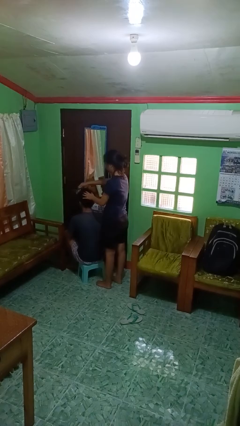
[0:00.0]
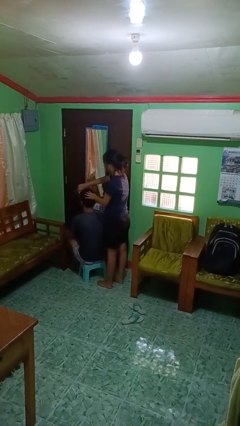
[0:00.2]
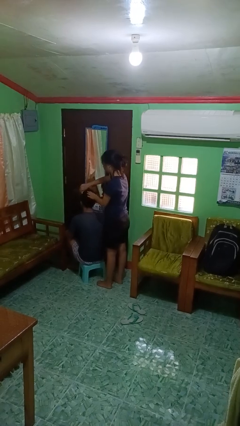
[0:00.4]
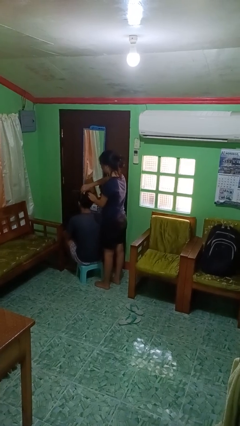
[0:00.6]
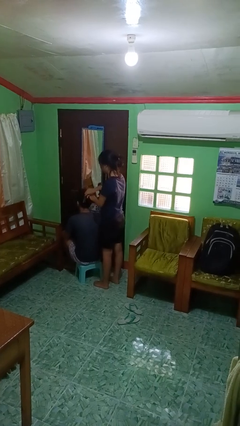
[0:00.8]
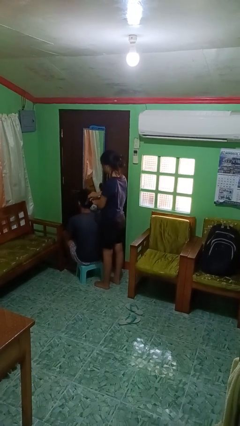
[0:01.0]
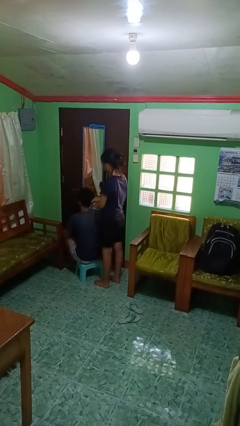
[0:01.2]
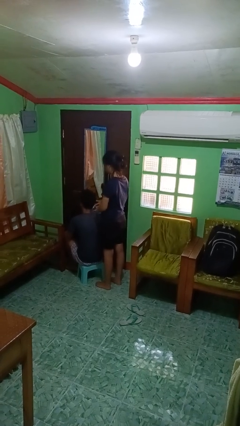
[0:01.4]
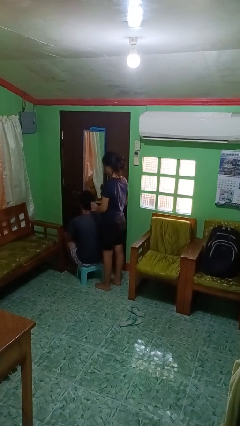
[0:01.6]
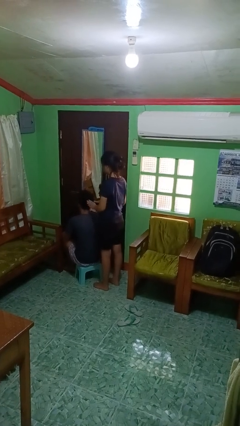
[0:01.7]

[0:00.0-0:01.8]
person brushes hair of person

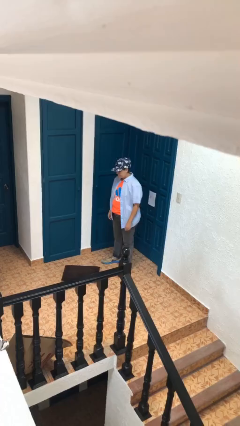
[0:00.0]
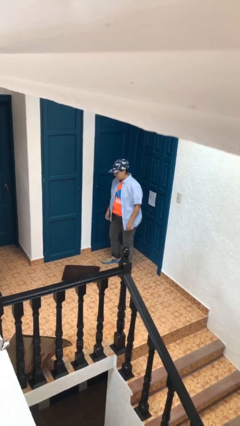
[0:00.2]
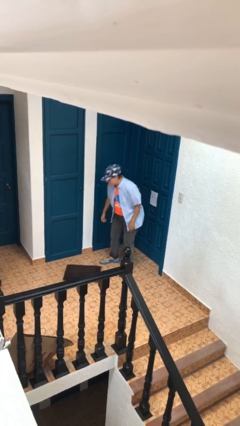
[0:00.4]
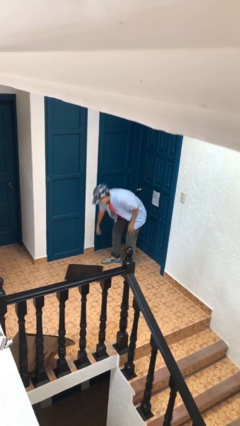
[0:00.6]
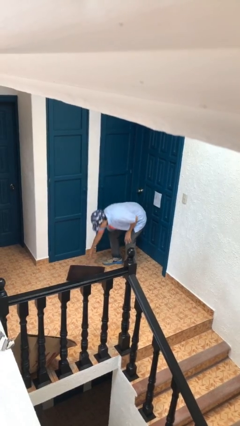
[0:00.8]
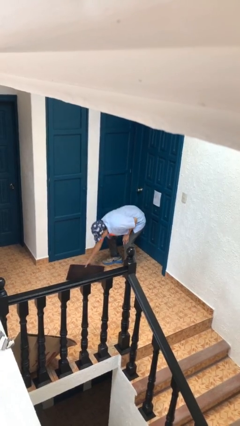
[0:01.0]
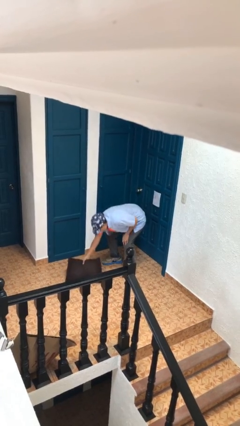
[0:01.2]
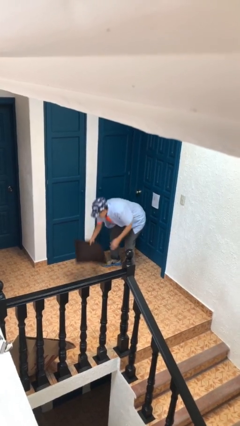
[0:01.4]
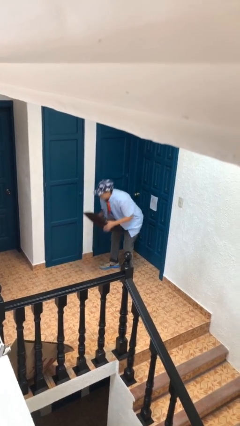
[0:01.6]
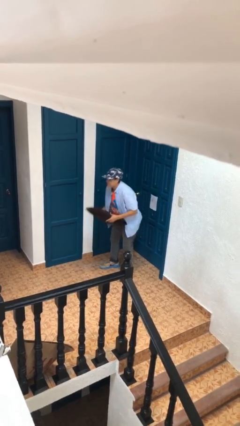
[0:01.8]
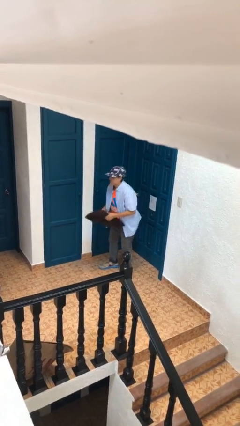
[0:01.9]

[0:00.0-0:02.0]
person picks up object from floor

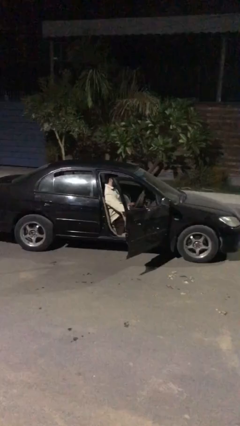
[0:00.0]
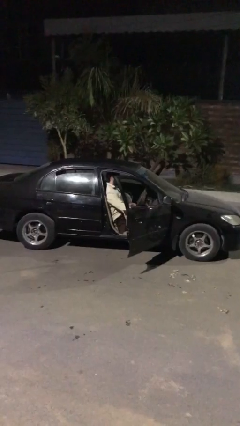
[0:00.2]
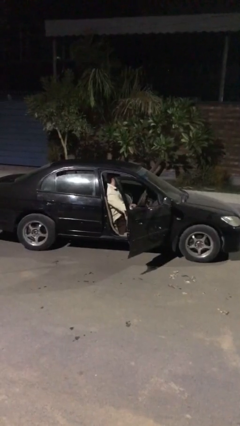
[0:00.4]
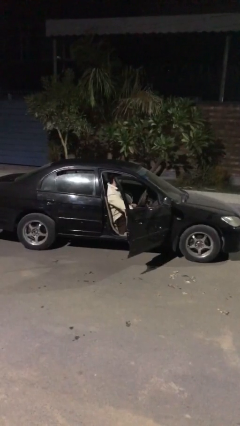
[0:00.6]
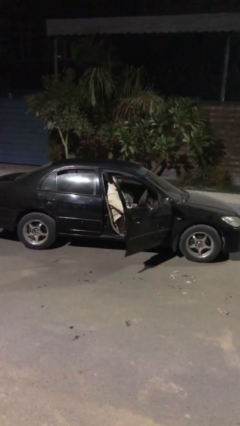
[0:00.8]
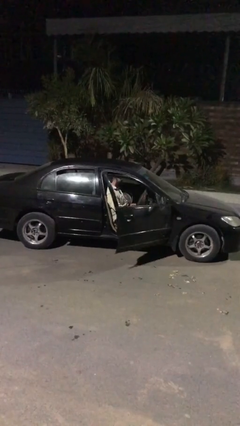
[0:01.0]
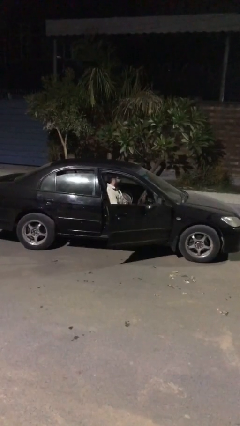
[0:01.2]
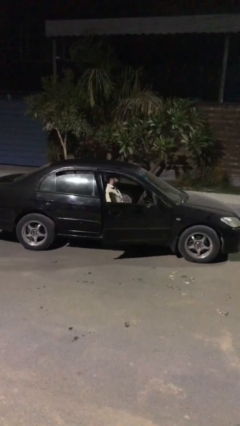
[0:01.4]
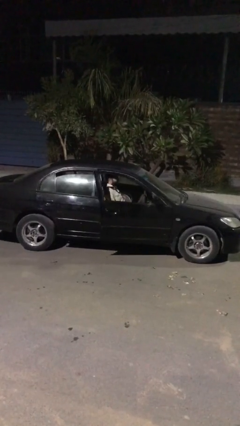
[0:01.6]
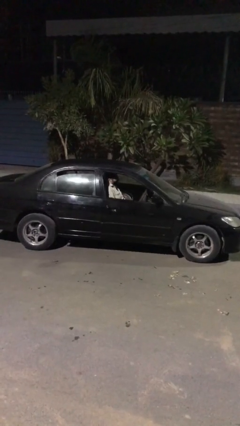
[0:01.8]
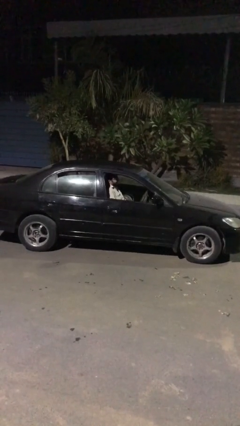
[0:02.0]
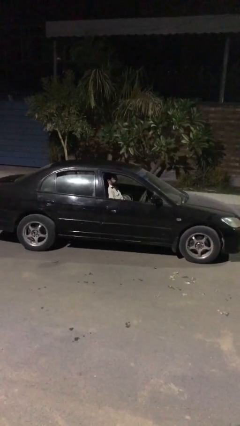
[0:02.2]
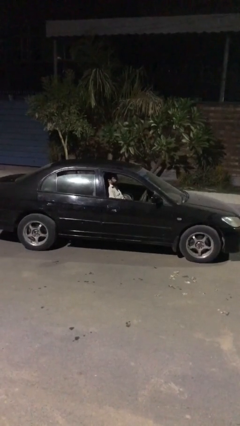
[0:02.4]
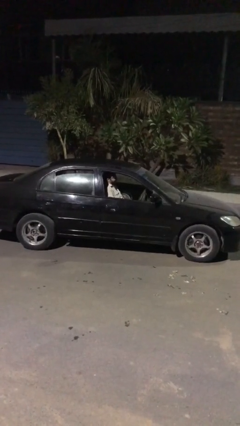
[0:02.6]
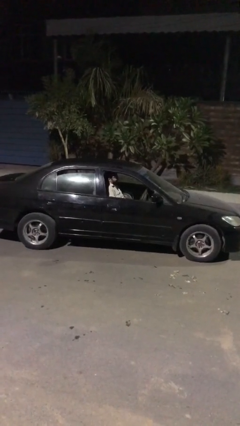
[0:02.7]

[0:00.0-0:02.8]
person closes car door

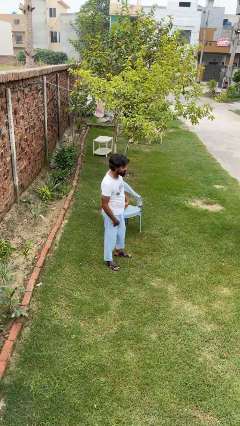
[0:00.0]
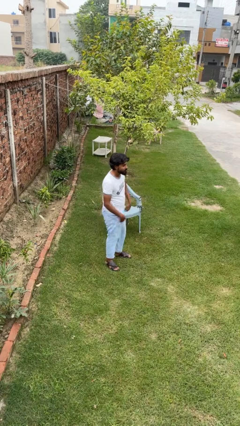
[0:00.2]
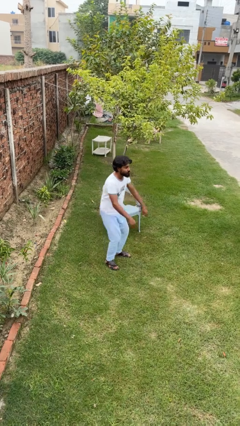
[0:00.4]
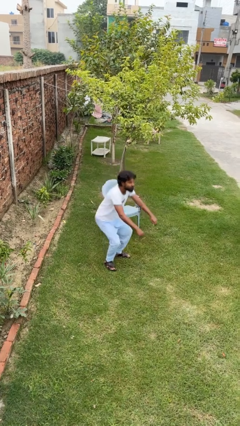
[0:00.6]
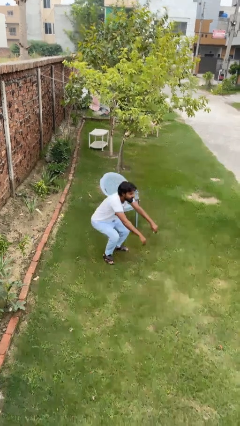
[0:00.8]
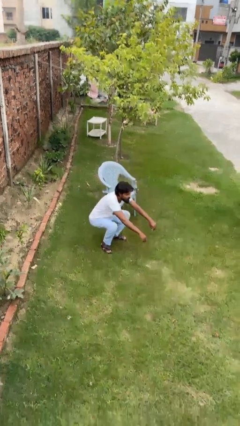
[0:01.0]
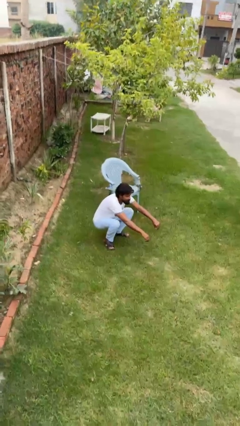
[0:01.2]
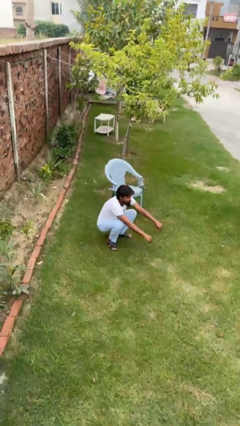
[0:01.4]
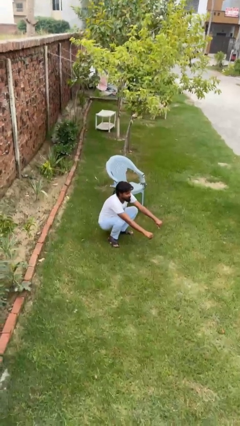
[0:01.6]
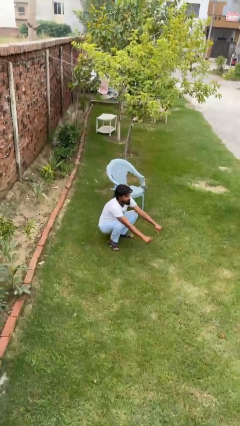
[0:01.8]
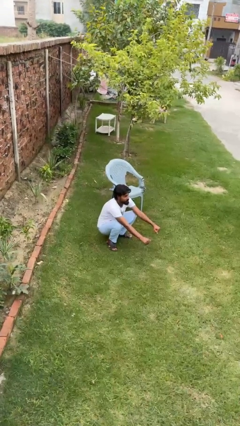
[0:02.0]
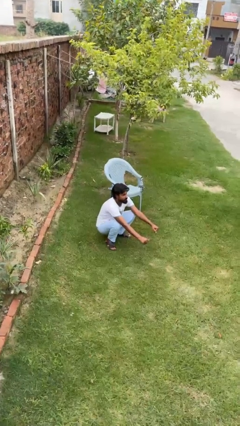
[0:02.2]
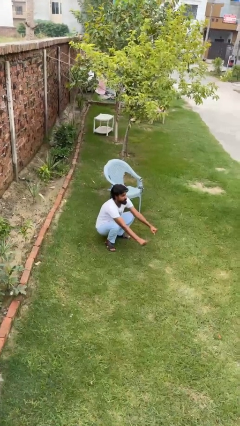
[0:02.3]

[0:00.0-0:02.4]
person squats

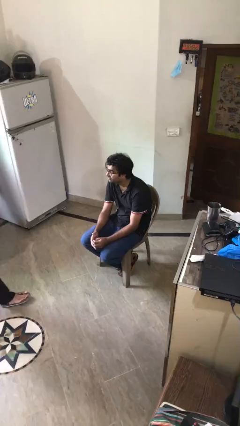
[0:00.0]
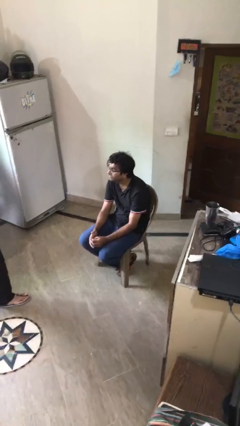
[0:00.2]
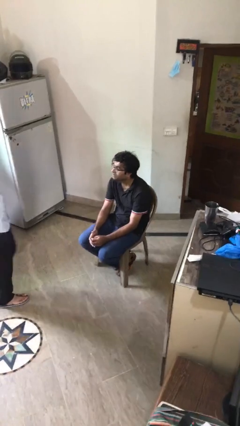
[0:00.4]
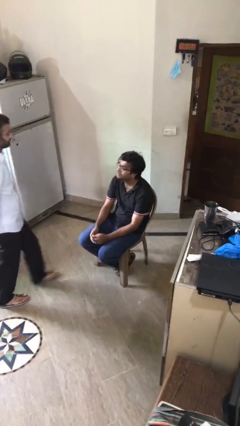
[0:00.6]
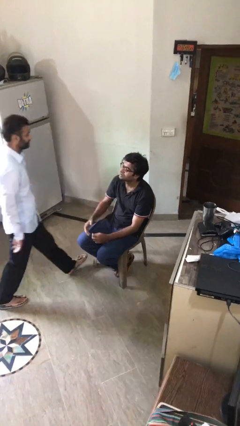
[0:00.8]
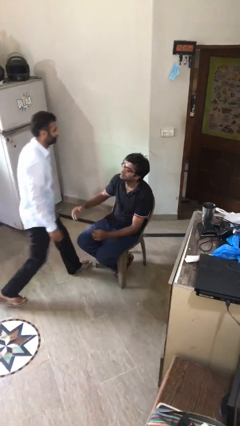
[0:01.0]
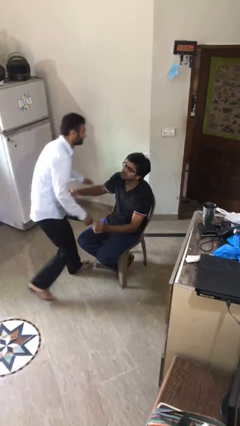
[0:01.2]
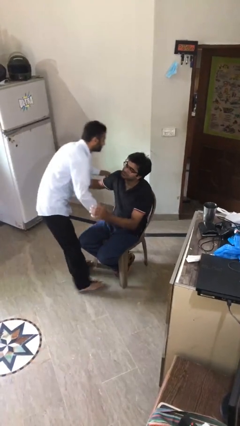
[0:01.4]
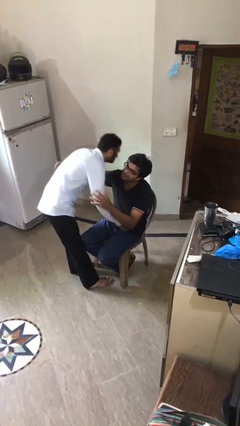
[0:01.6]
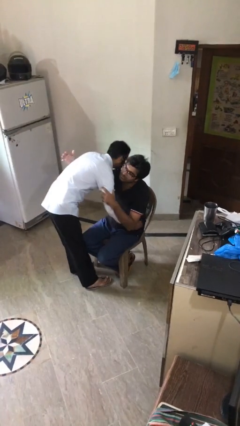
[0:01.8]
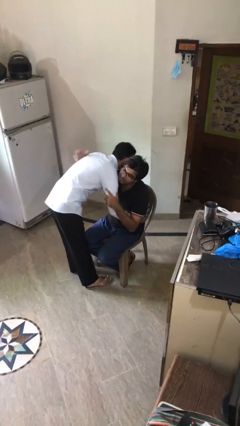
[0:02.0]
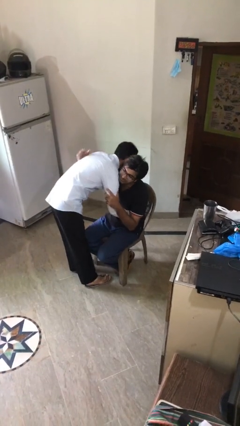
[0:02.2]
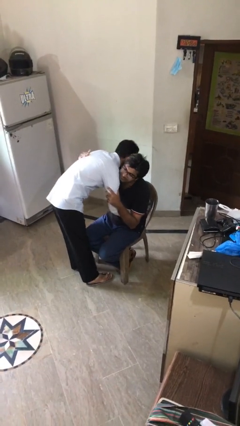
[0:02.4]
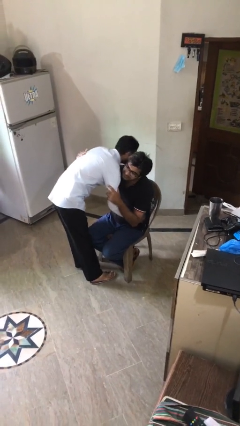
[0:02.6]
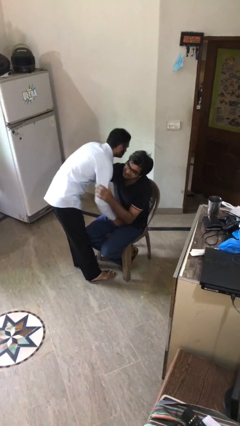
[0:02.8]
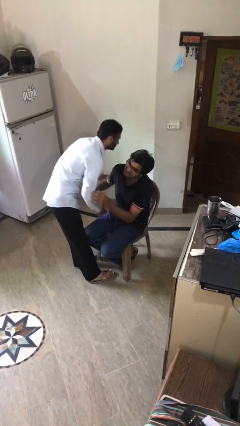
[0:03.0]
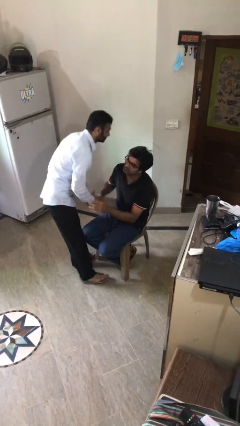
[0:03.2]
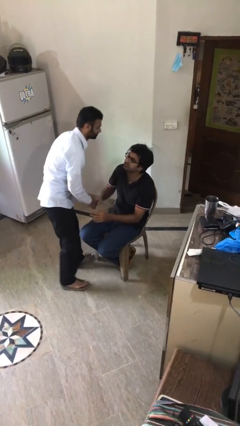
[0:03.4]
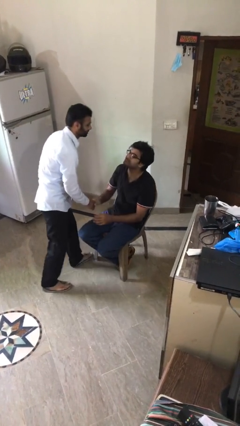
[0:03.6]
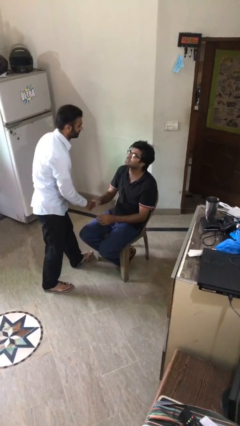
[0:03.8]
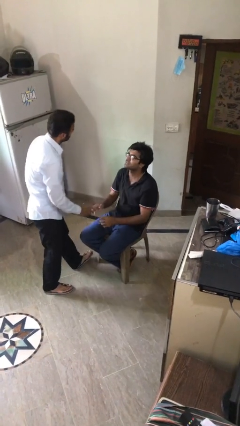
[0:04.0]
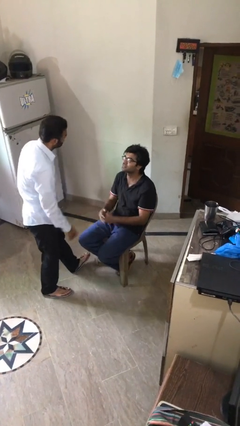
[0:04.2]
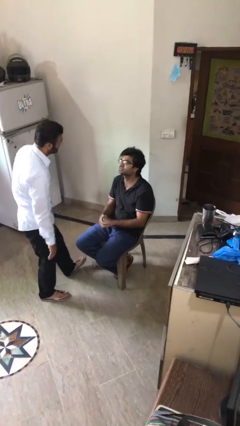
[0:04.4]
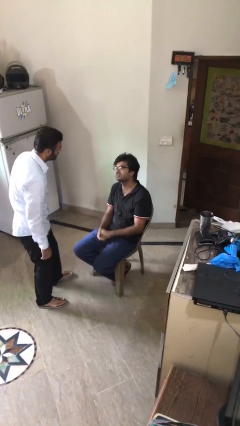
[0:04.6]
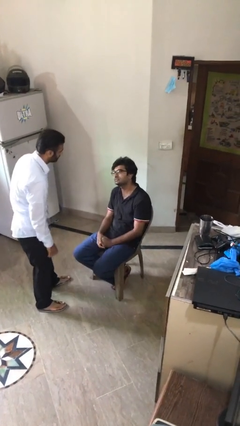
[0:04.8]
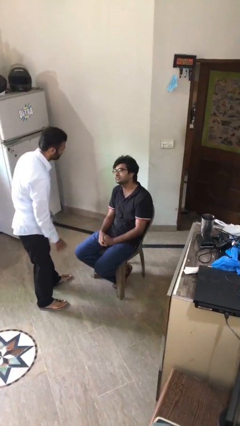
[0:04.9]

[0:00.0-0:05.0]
person embraces person

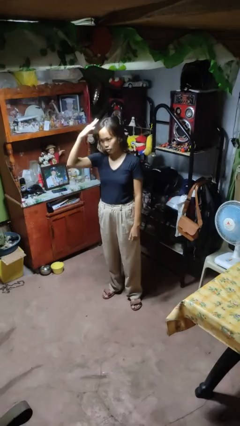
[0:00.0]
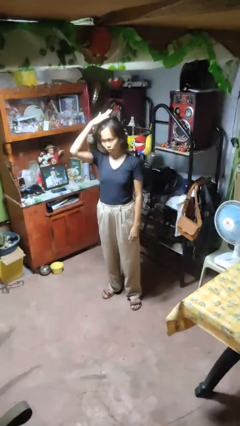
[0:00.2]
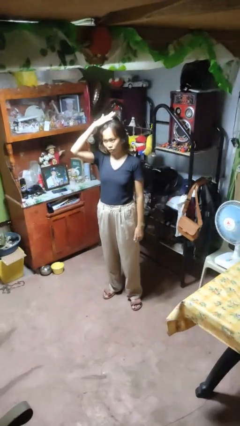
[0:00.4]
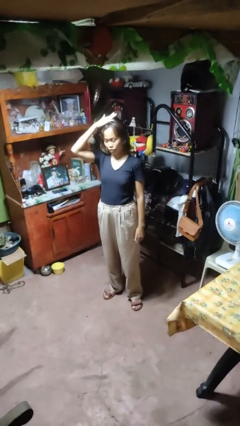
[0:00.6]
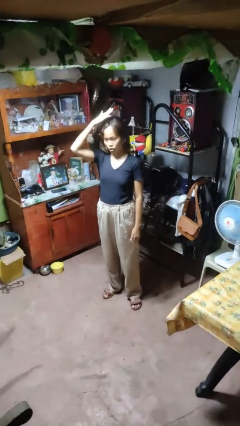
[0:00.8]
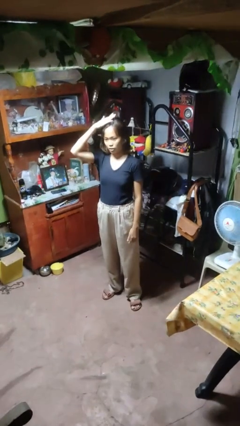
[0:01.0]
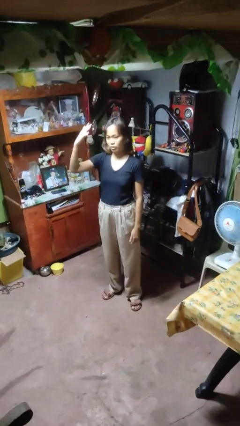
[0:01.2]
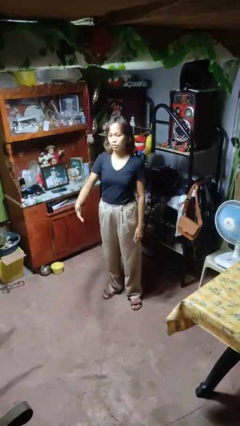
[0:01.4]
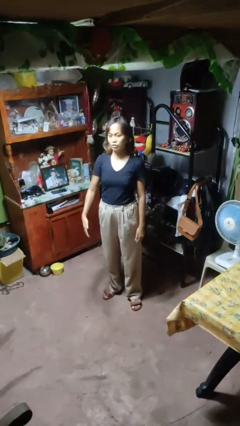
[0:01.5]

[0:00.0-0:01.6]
person pats head

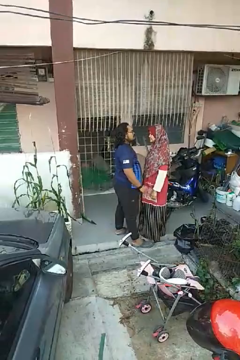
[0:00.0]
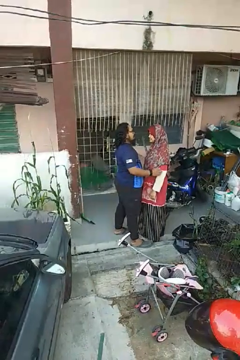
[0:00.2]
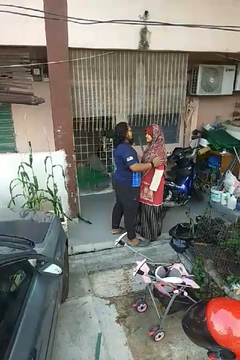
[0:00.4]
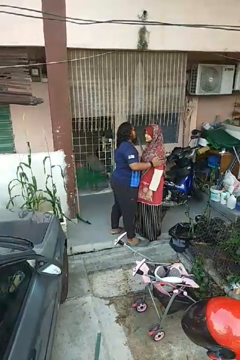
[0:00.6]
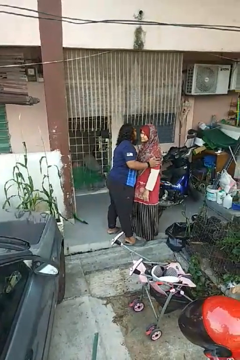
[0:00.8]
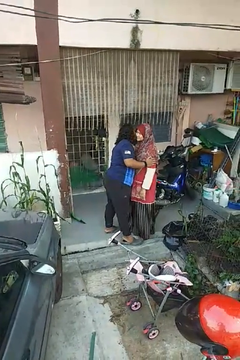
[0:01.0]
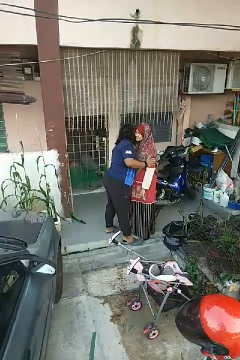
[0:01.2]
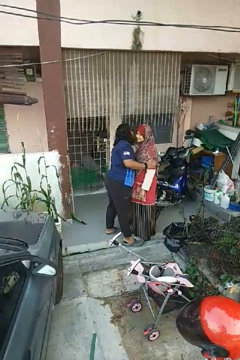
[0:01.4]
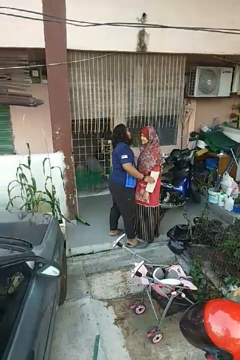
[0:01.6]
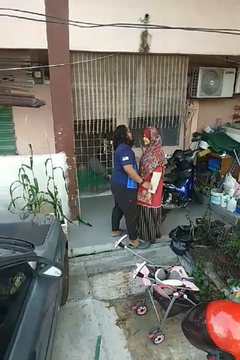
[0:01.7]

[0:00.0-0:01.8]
person kisses cheek of person
